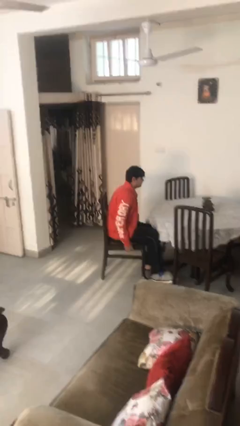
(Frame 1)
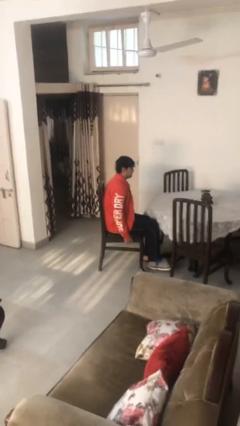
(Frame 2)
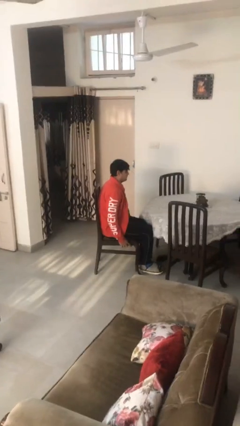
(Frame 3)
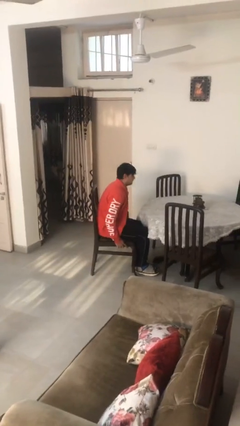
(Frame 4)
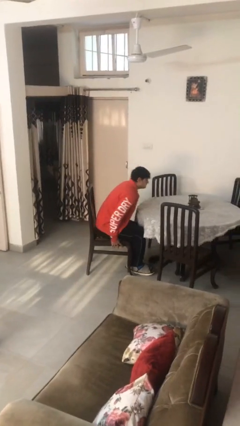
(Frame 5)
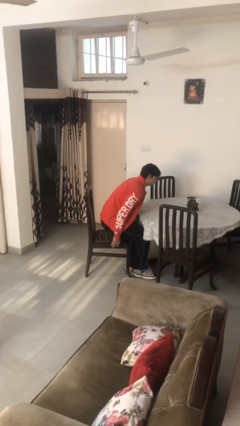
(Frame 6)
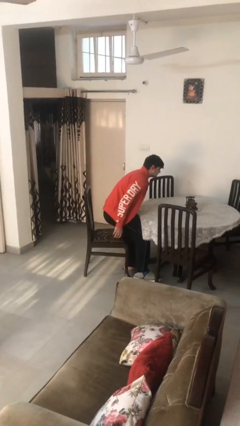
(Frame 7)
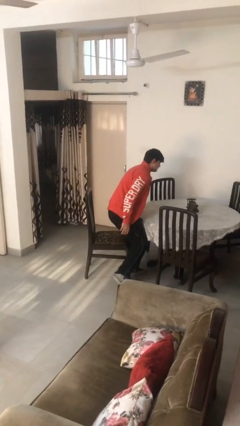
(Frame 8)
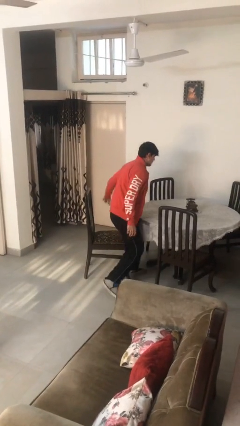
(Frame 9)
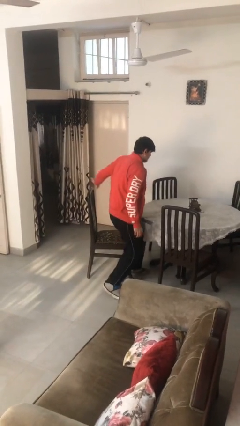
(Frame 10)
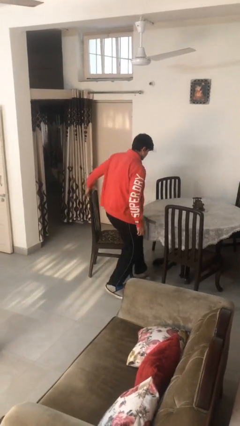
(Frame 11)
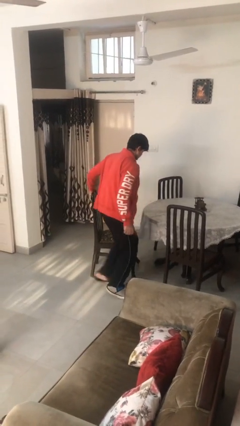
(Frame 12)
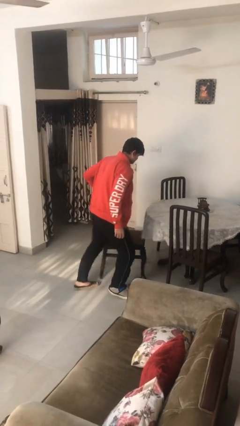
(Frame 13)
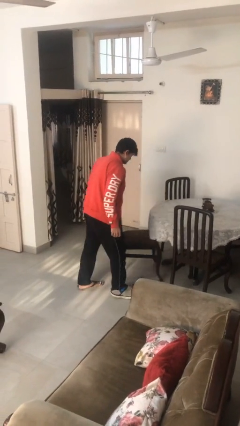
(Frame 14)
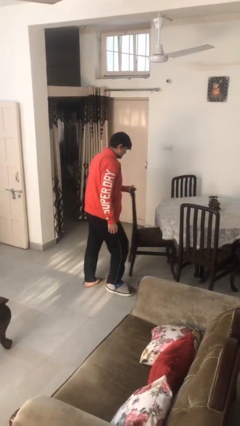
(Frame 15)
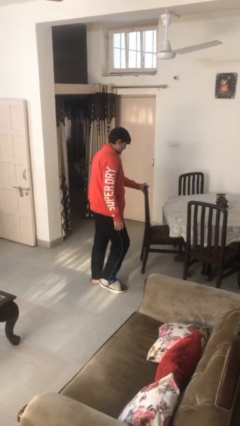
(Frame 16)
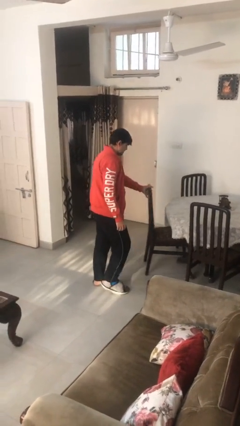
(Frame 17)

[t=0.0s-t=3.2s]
person stands up

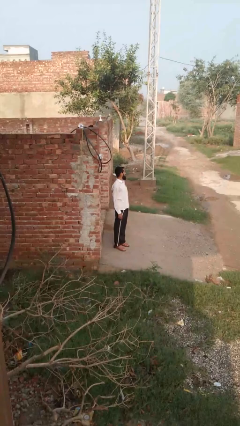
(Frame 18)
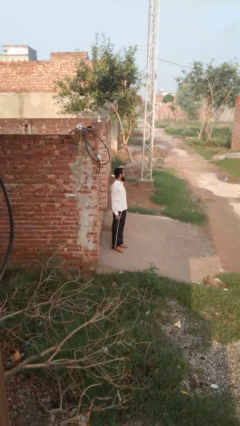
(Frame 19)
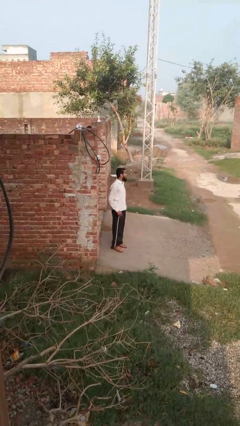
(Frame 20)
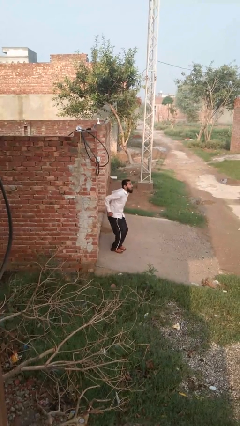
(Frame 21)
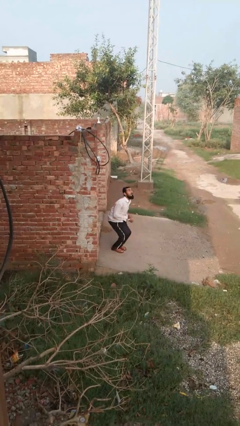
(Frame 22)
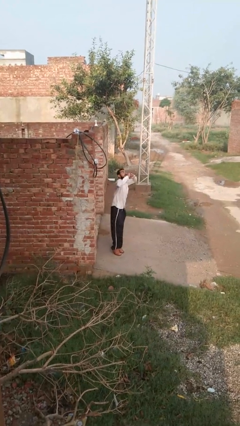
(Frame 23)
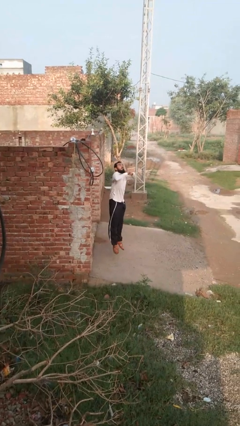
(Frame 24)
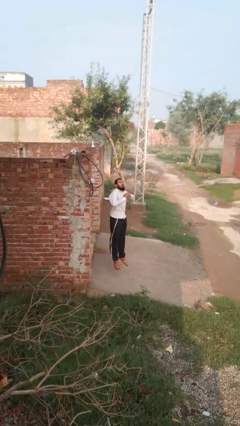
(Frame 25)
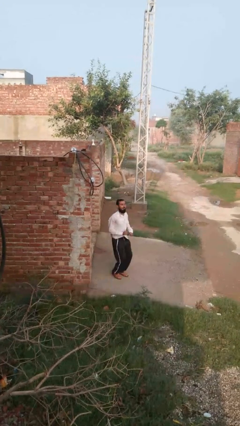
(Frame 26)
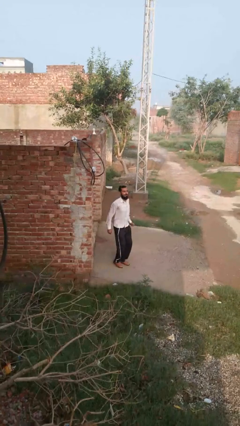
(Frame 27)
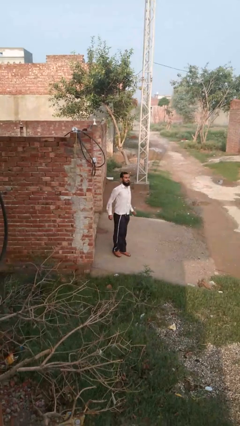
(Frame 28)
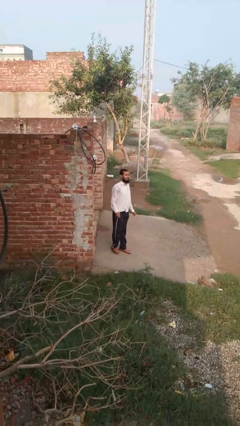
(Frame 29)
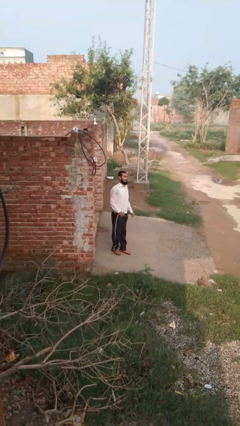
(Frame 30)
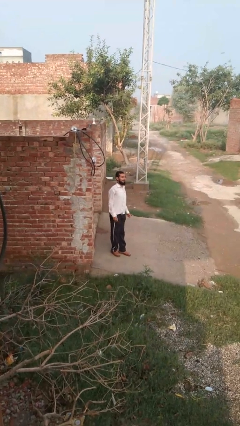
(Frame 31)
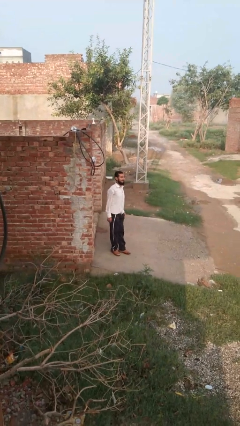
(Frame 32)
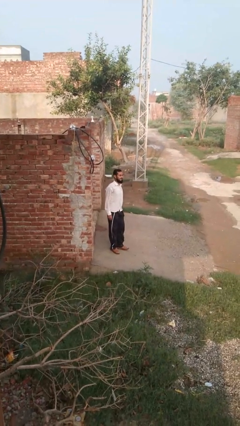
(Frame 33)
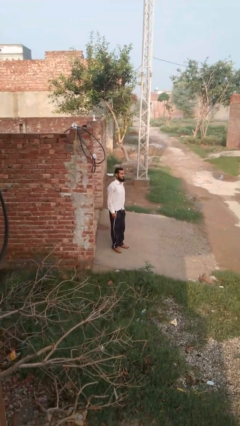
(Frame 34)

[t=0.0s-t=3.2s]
person jumps

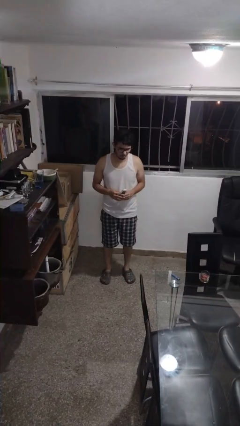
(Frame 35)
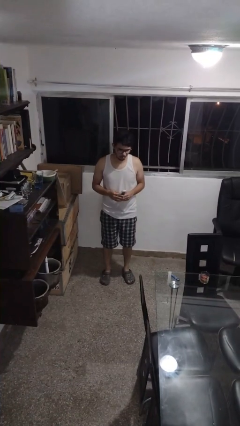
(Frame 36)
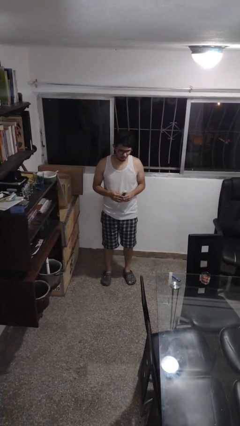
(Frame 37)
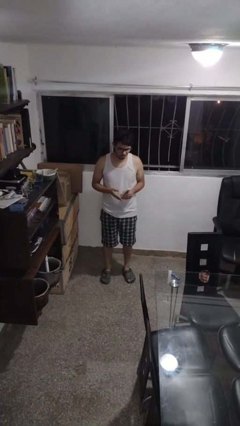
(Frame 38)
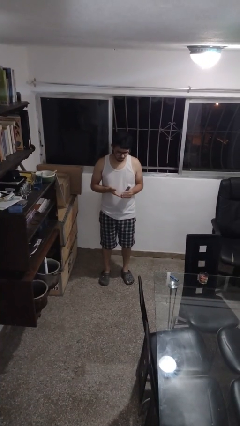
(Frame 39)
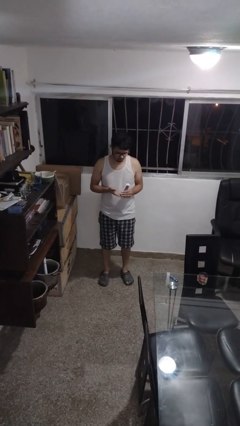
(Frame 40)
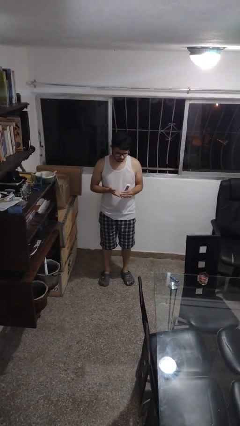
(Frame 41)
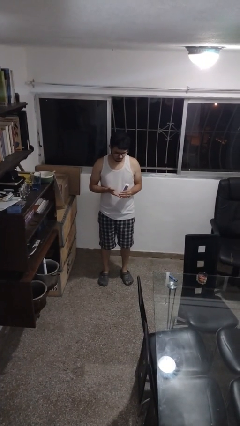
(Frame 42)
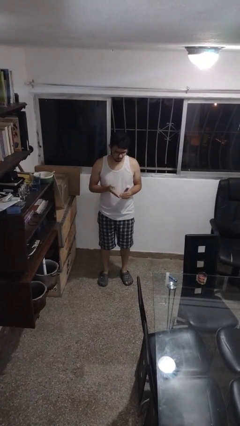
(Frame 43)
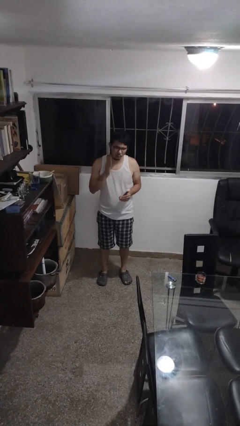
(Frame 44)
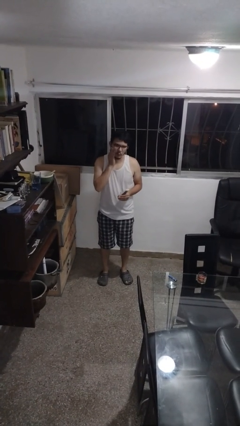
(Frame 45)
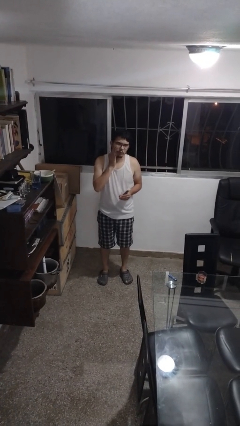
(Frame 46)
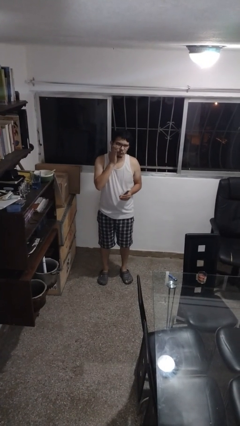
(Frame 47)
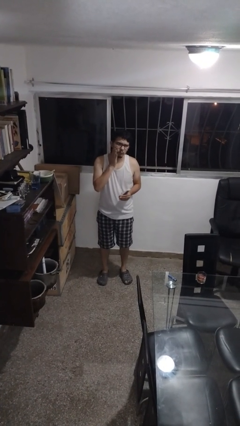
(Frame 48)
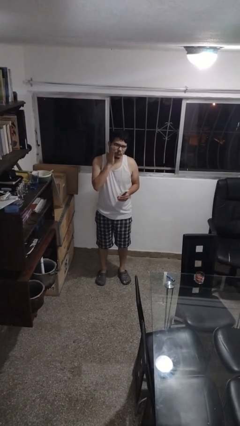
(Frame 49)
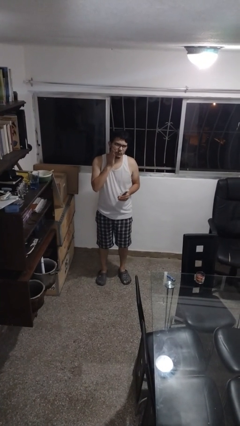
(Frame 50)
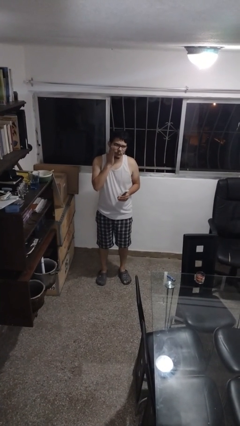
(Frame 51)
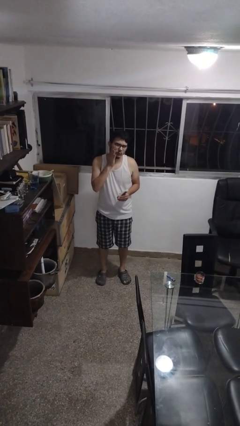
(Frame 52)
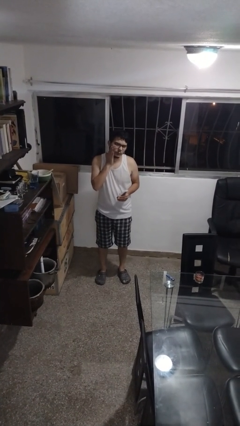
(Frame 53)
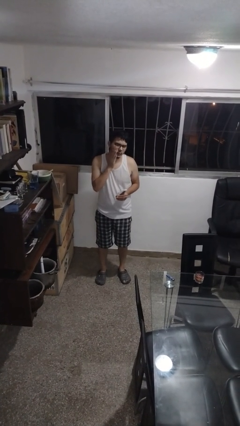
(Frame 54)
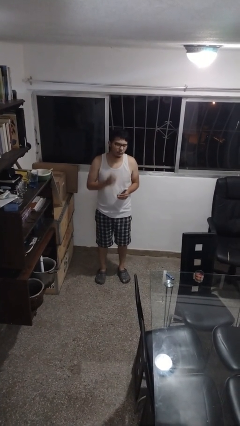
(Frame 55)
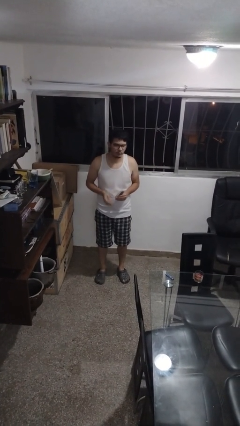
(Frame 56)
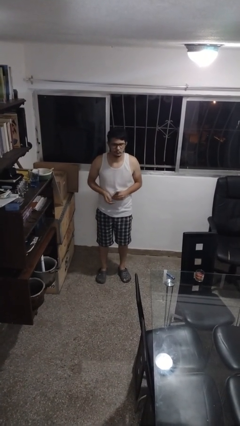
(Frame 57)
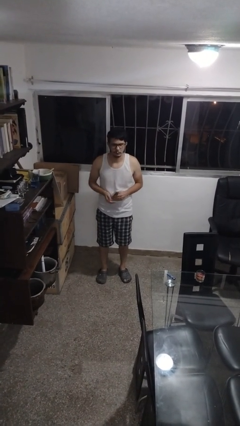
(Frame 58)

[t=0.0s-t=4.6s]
person applies facial moisturizer

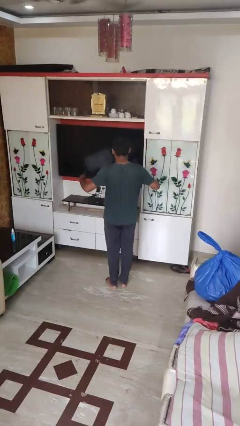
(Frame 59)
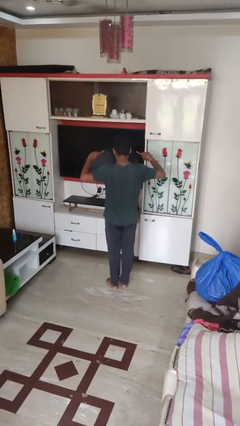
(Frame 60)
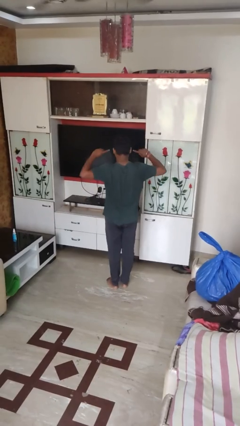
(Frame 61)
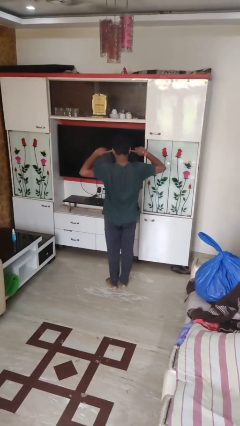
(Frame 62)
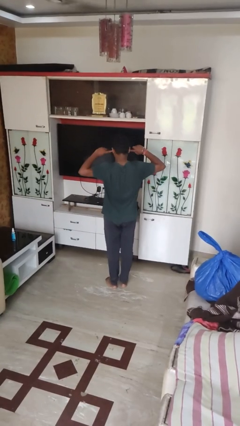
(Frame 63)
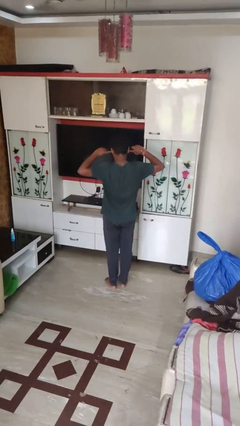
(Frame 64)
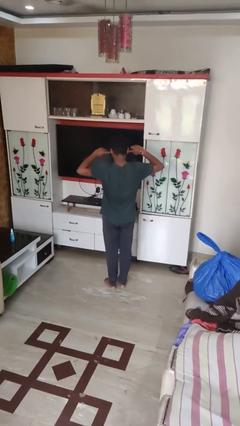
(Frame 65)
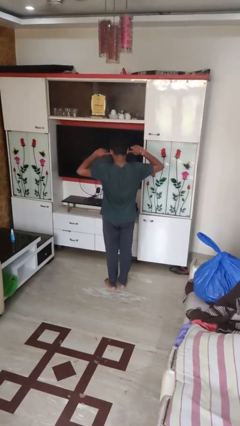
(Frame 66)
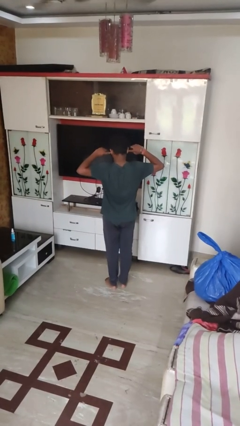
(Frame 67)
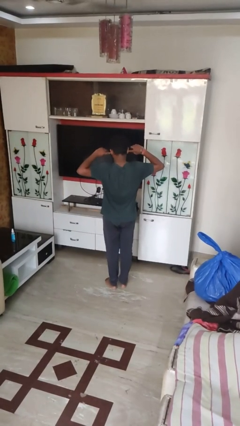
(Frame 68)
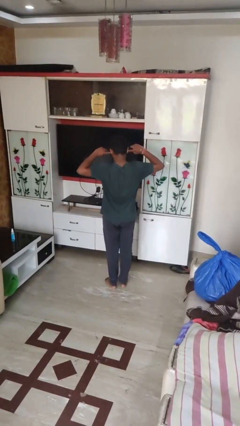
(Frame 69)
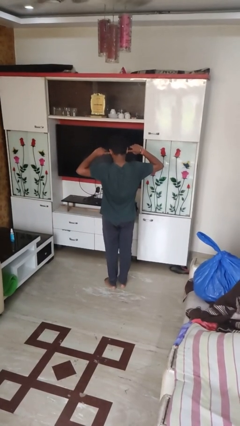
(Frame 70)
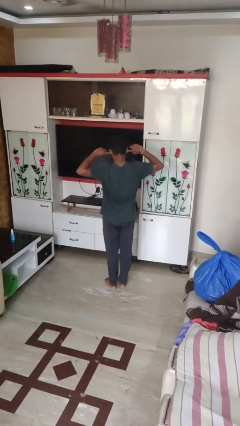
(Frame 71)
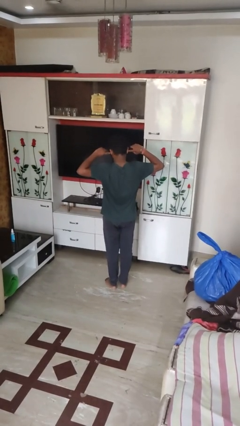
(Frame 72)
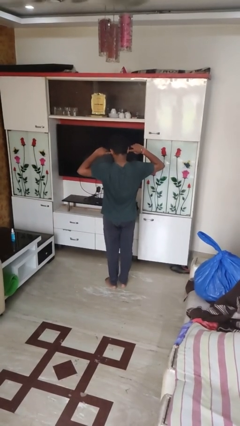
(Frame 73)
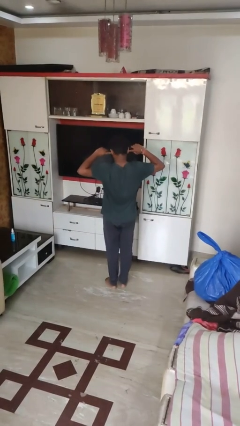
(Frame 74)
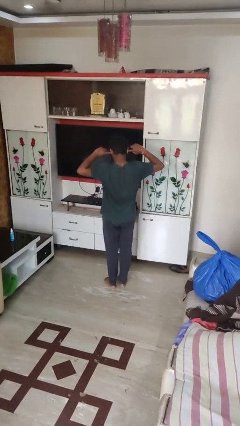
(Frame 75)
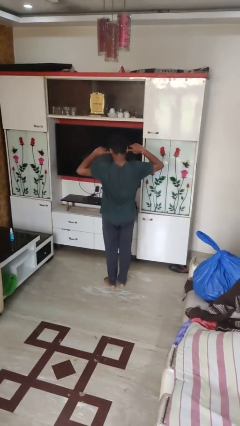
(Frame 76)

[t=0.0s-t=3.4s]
person puts fingers in ear

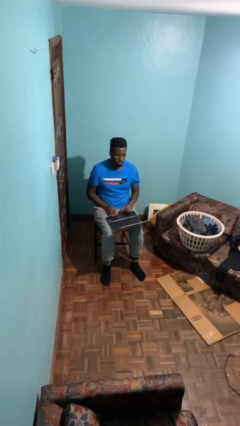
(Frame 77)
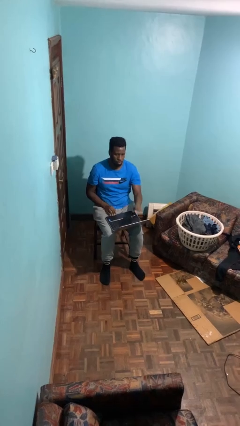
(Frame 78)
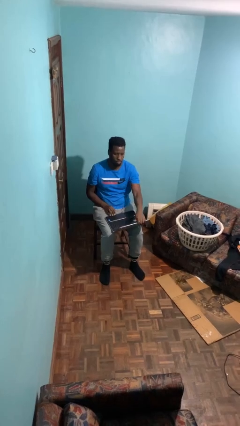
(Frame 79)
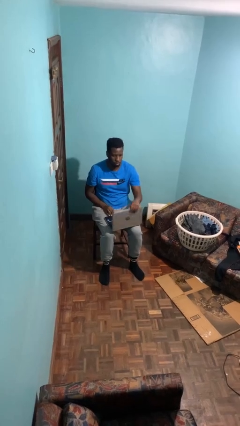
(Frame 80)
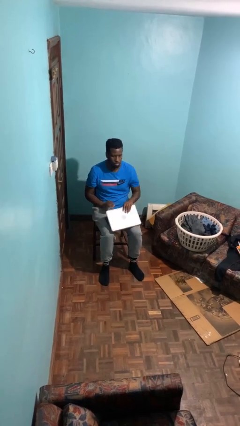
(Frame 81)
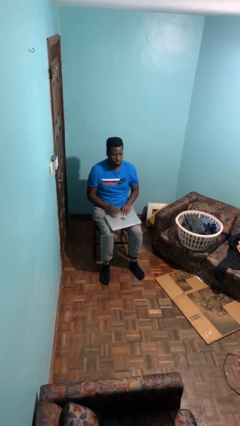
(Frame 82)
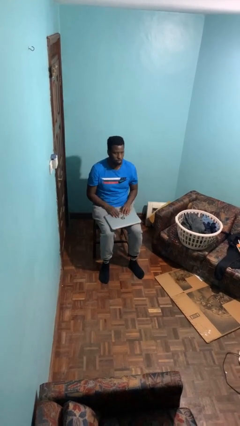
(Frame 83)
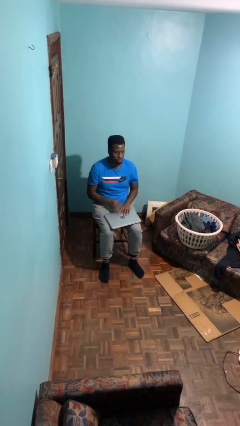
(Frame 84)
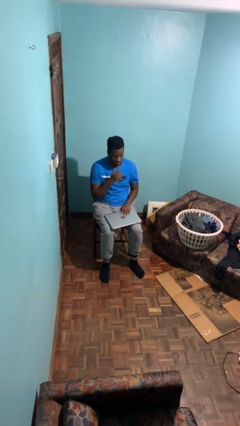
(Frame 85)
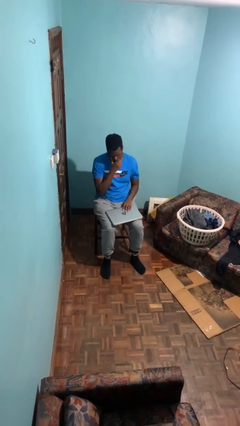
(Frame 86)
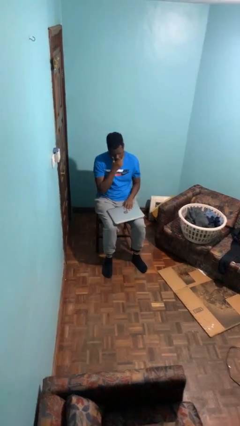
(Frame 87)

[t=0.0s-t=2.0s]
person closes laptop

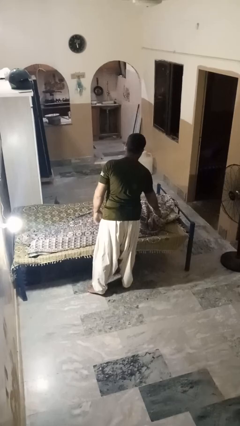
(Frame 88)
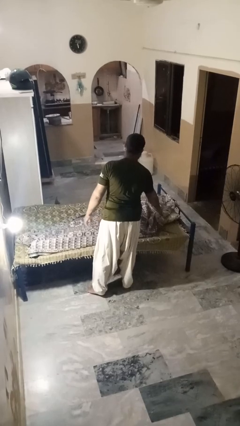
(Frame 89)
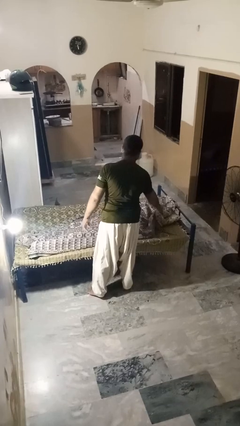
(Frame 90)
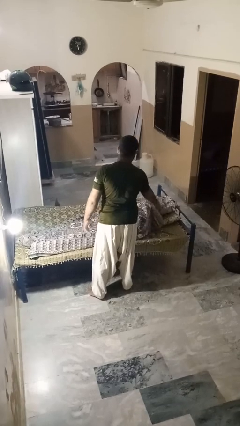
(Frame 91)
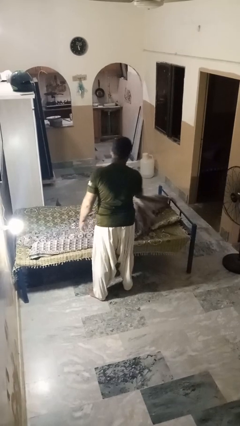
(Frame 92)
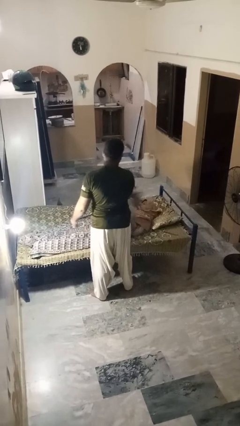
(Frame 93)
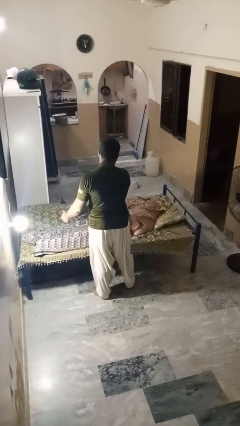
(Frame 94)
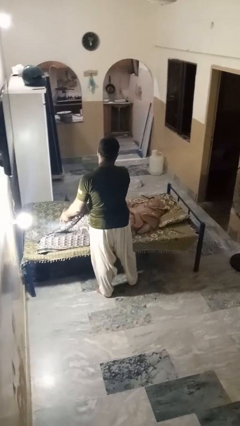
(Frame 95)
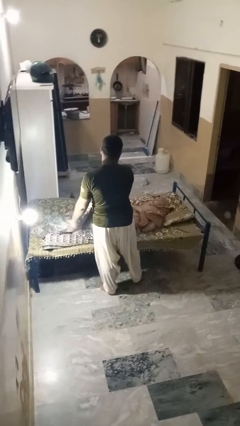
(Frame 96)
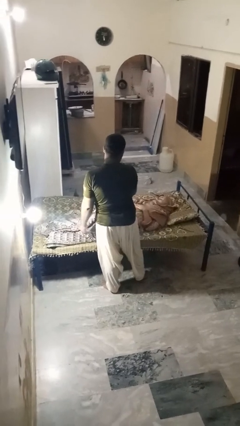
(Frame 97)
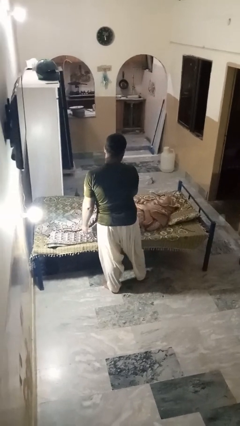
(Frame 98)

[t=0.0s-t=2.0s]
person uncovers friend with blanket
